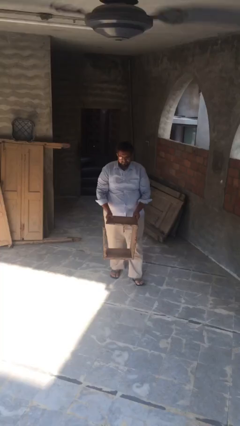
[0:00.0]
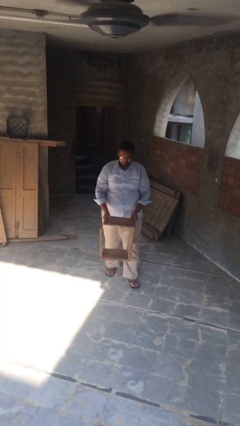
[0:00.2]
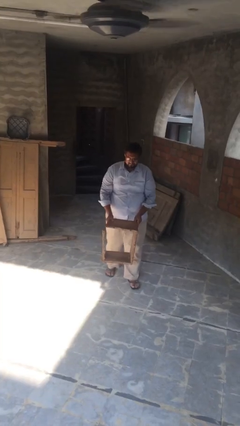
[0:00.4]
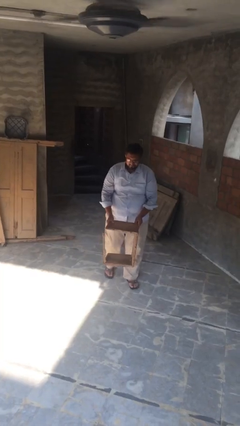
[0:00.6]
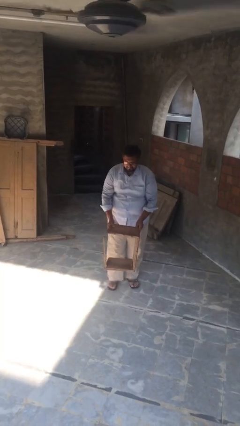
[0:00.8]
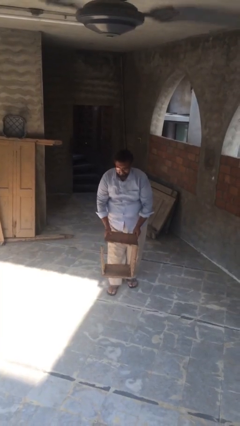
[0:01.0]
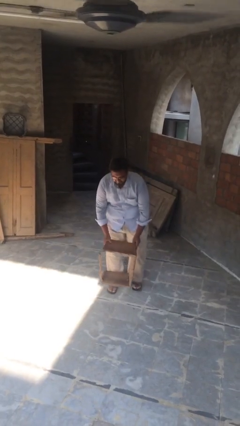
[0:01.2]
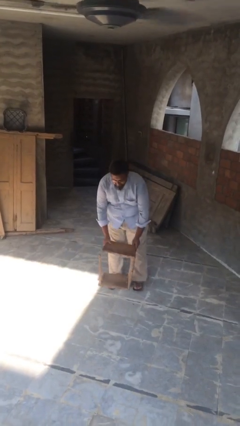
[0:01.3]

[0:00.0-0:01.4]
person puts down object on floor

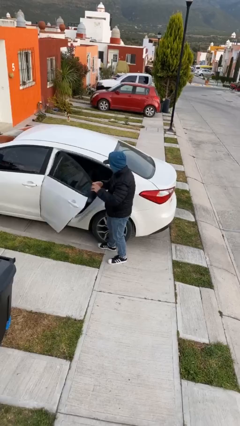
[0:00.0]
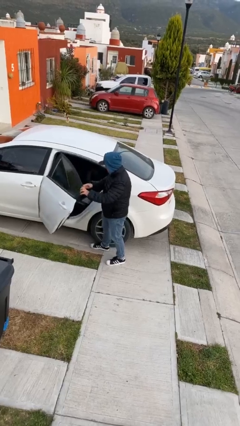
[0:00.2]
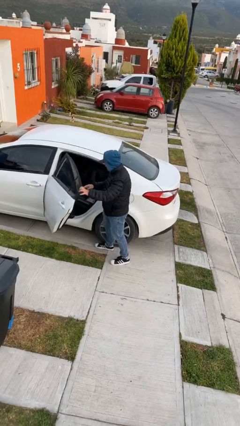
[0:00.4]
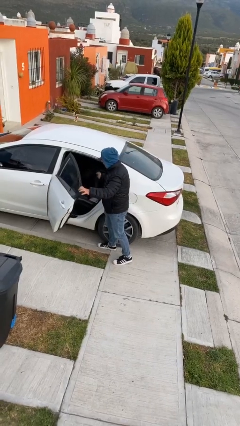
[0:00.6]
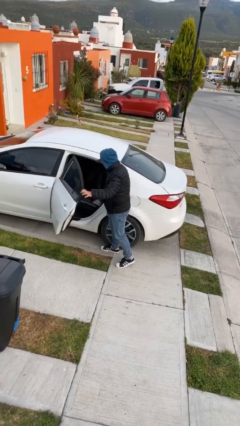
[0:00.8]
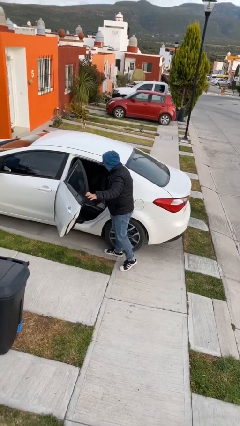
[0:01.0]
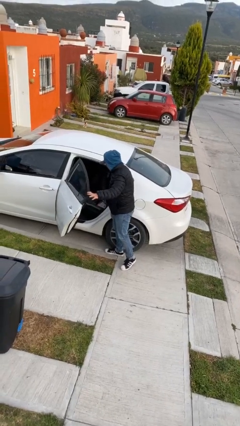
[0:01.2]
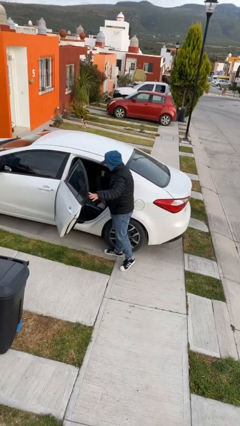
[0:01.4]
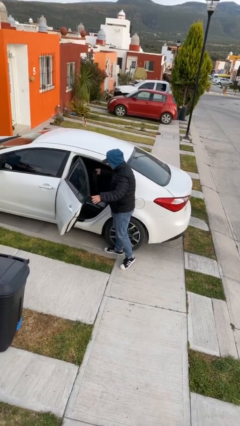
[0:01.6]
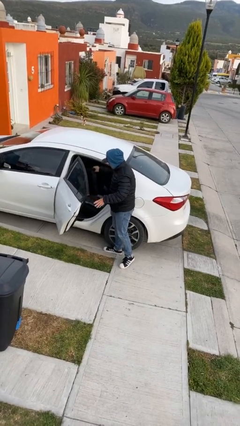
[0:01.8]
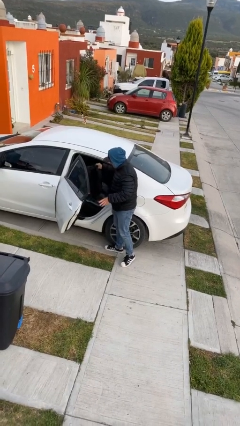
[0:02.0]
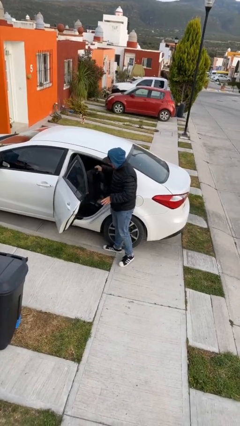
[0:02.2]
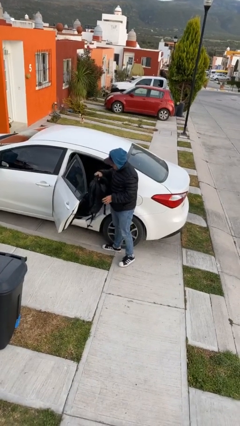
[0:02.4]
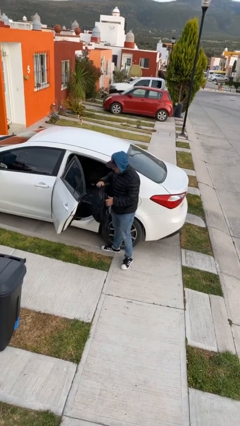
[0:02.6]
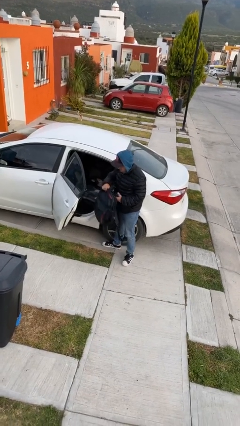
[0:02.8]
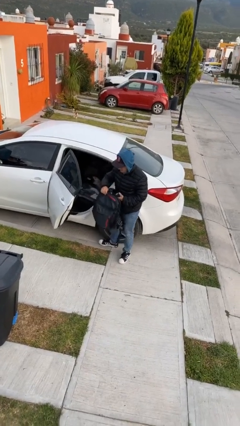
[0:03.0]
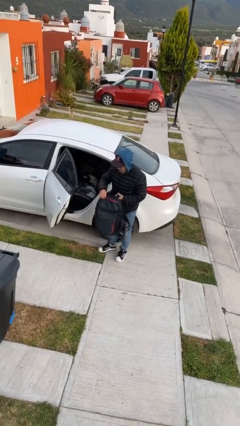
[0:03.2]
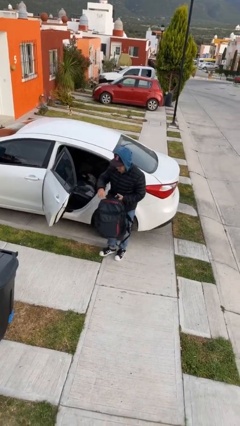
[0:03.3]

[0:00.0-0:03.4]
person unloads car

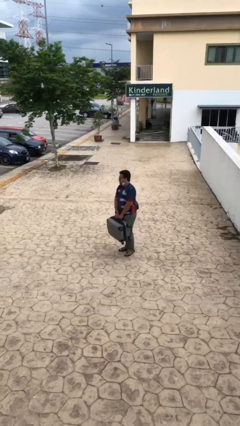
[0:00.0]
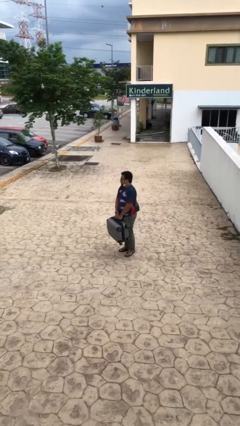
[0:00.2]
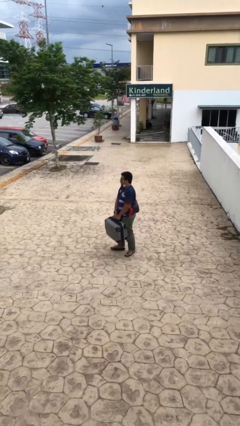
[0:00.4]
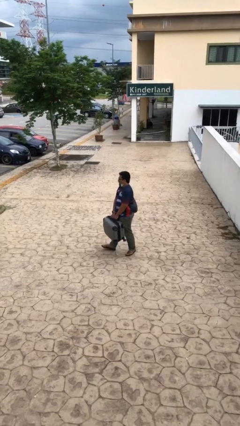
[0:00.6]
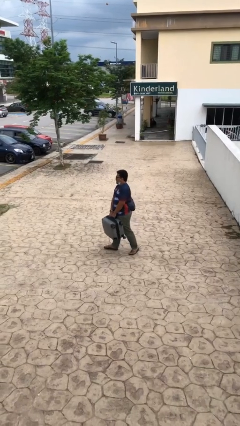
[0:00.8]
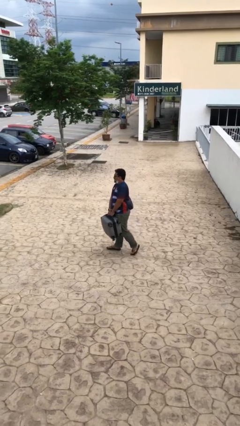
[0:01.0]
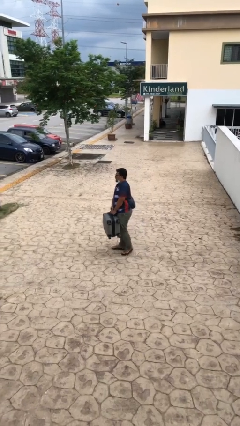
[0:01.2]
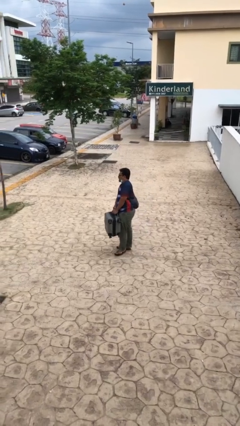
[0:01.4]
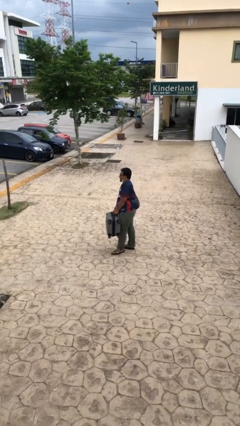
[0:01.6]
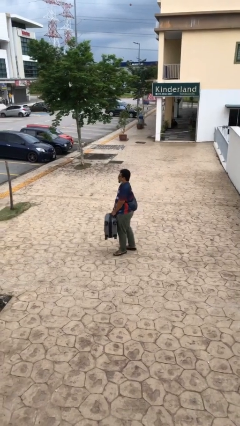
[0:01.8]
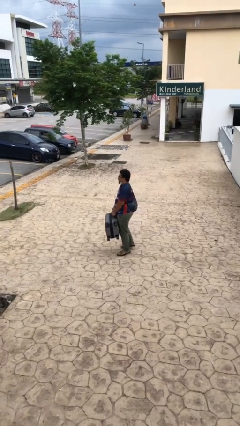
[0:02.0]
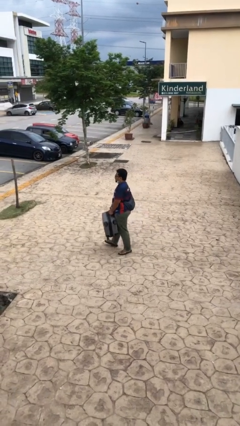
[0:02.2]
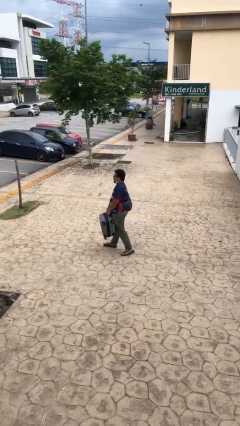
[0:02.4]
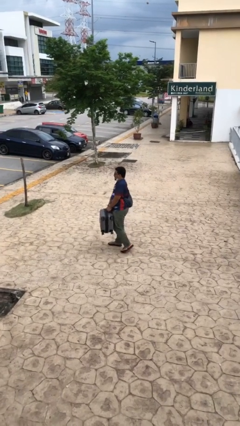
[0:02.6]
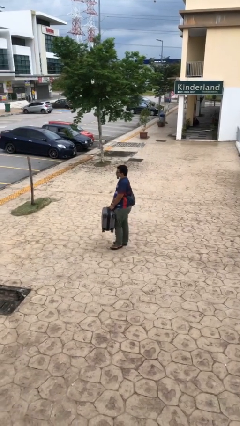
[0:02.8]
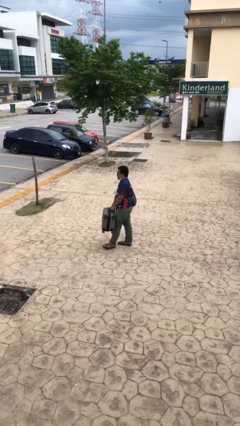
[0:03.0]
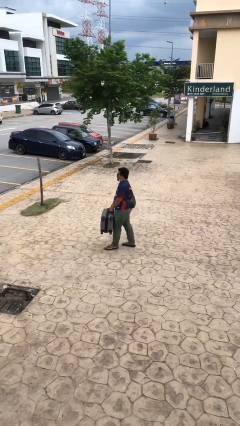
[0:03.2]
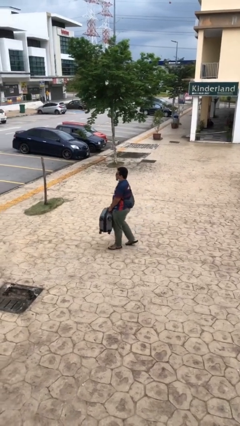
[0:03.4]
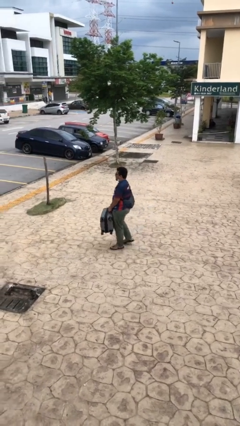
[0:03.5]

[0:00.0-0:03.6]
person carries heavy object

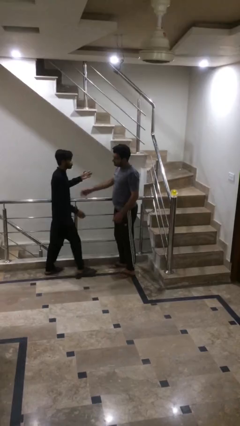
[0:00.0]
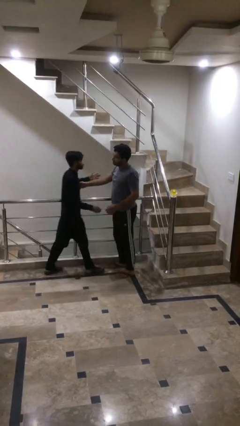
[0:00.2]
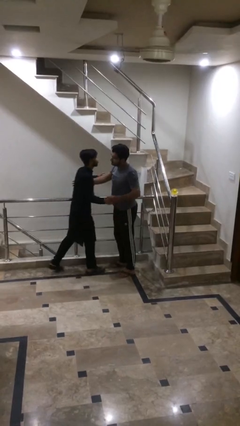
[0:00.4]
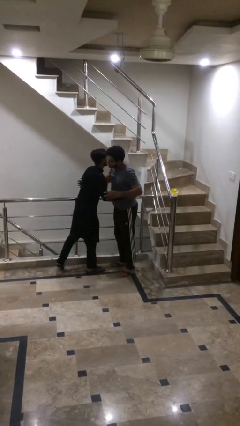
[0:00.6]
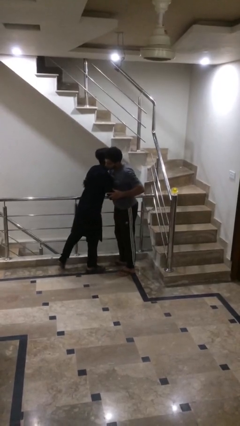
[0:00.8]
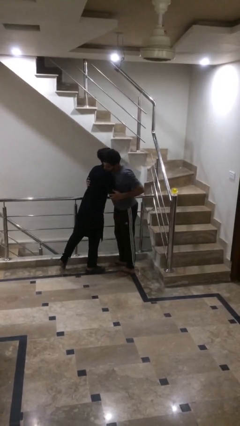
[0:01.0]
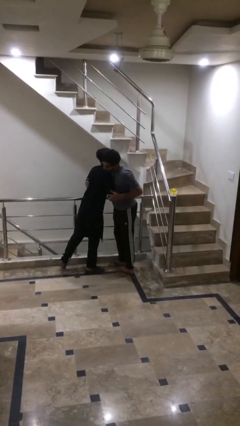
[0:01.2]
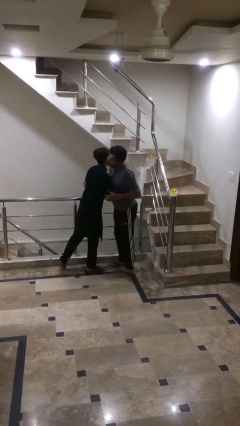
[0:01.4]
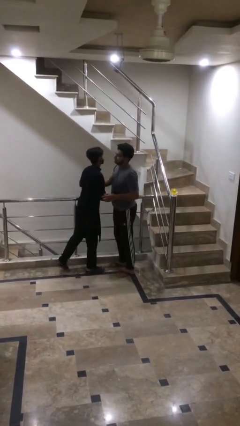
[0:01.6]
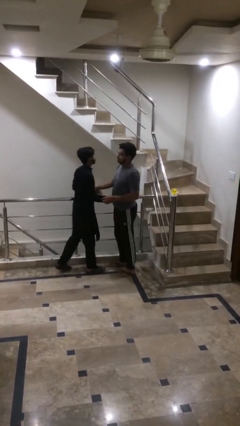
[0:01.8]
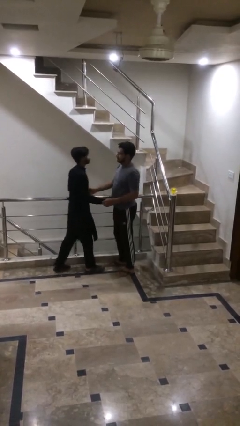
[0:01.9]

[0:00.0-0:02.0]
person embraces person

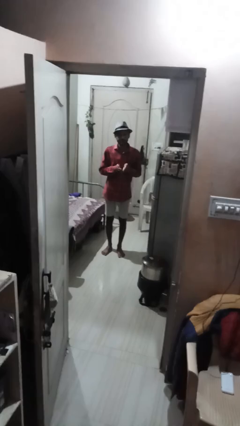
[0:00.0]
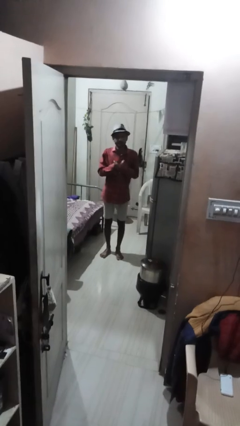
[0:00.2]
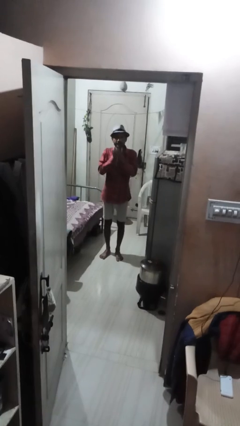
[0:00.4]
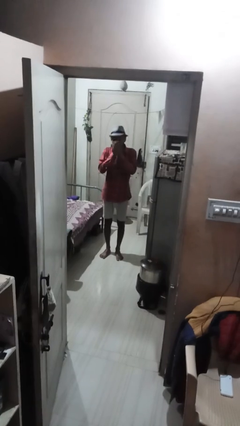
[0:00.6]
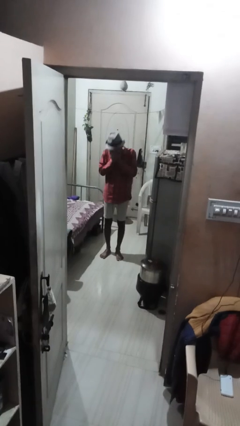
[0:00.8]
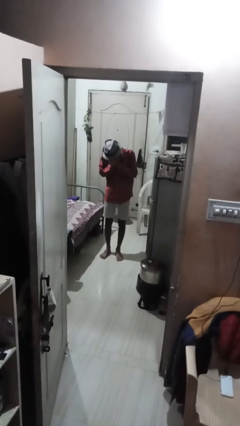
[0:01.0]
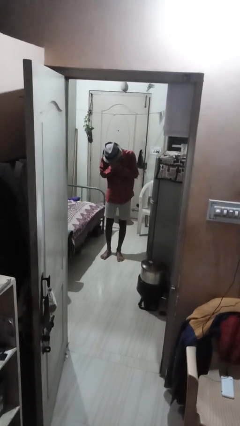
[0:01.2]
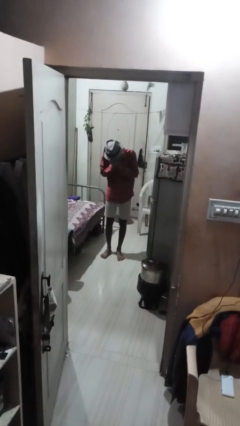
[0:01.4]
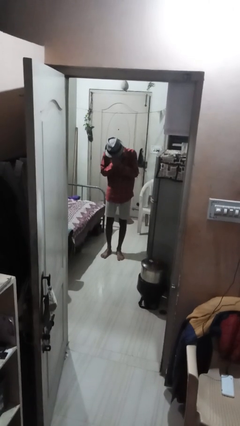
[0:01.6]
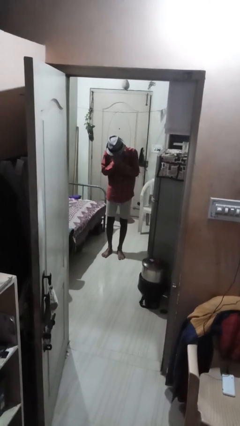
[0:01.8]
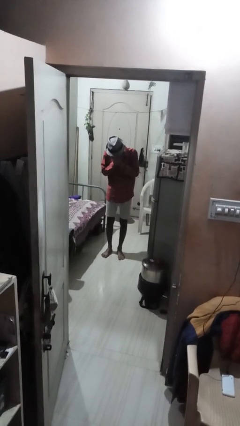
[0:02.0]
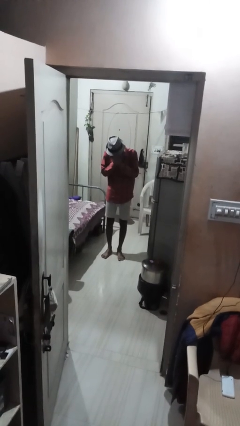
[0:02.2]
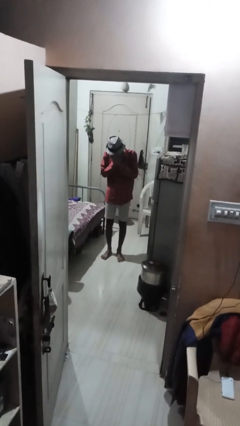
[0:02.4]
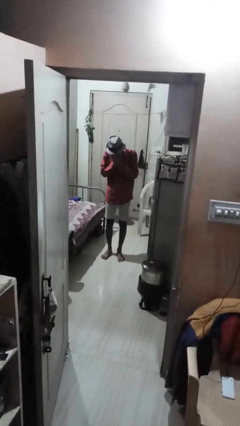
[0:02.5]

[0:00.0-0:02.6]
person sneezes into hand

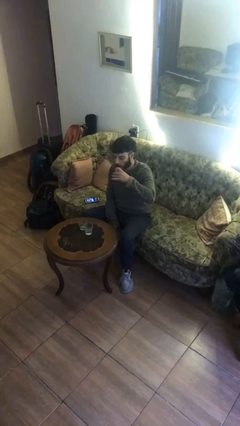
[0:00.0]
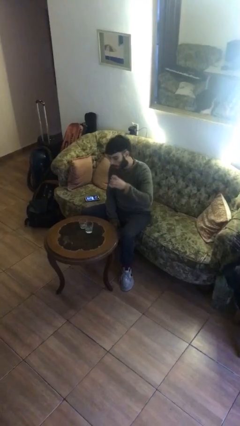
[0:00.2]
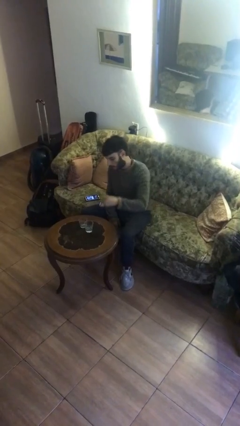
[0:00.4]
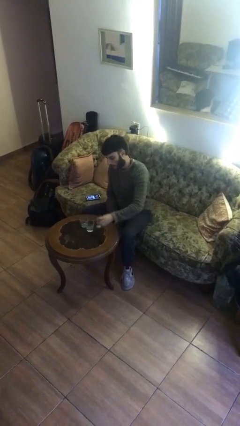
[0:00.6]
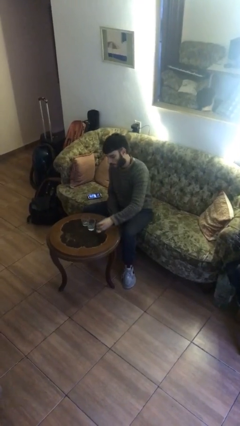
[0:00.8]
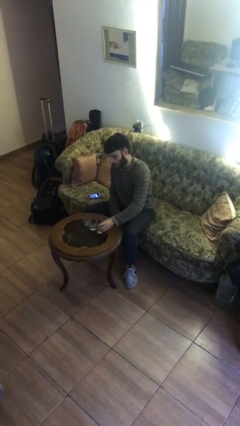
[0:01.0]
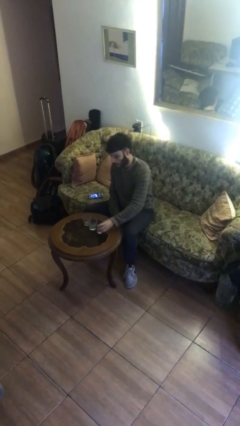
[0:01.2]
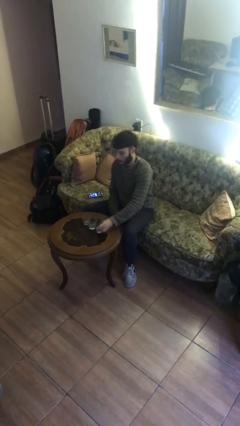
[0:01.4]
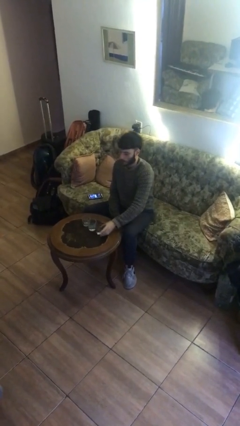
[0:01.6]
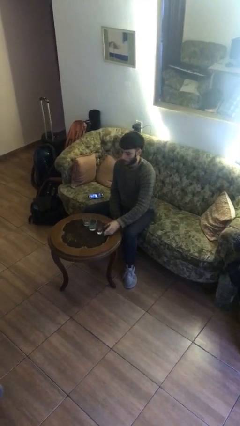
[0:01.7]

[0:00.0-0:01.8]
person puts down object on table

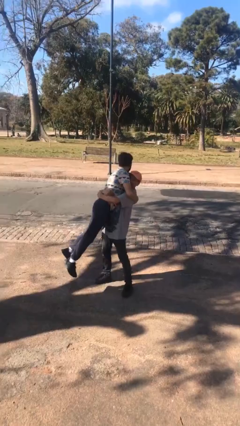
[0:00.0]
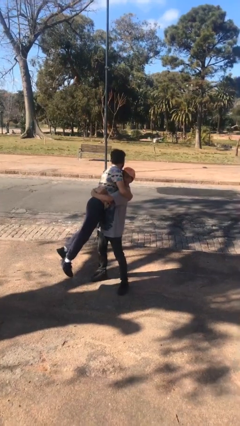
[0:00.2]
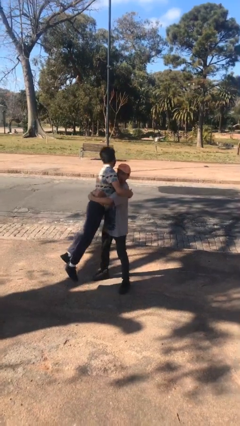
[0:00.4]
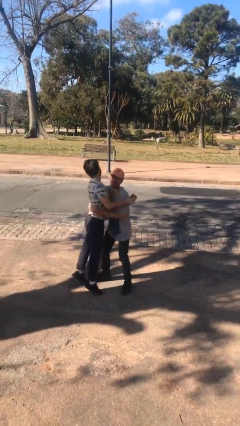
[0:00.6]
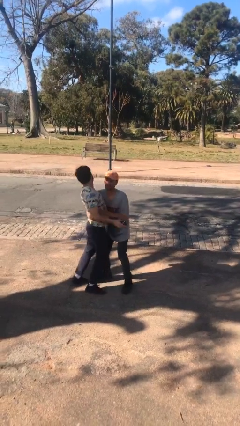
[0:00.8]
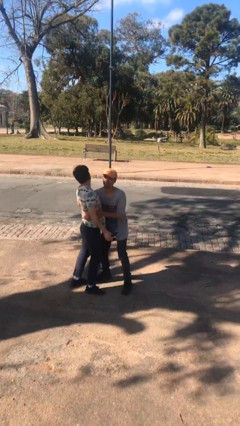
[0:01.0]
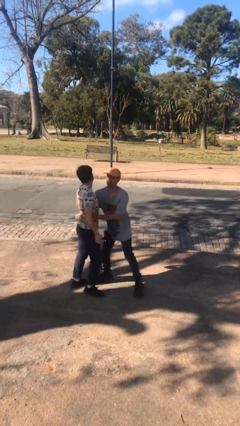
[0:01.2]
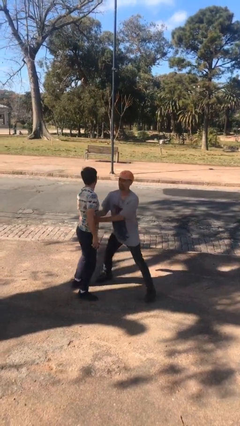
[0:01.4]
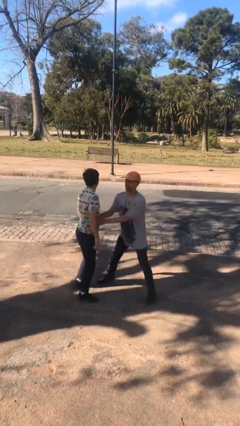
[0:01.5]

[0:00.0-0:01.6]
person puts down person

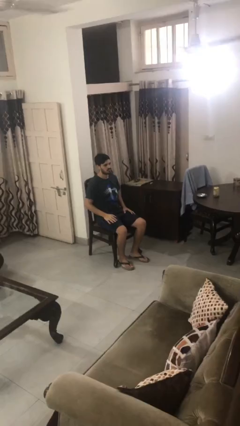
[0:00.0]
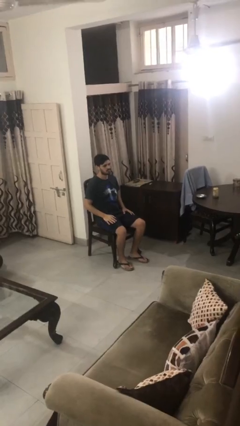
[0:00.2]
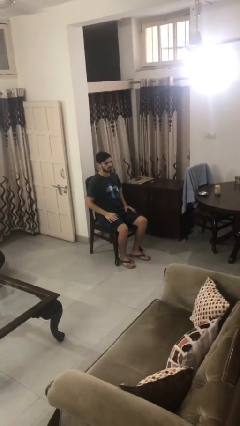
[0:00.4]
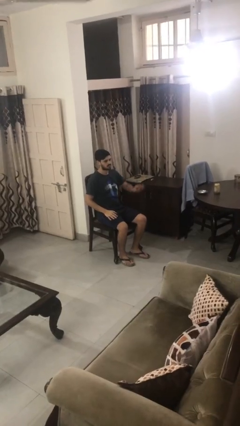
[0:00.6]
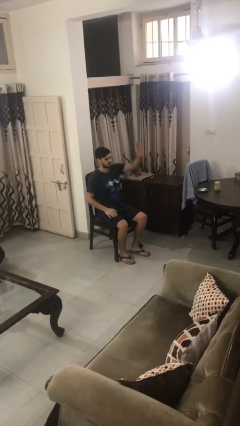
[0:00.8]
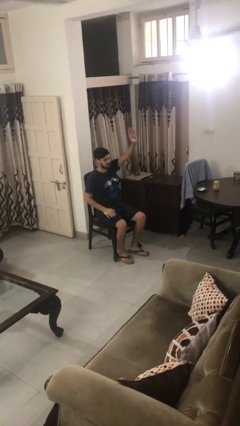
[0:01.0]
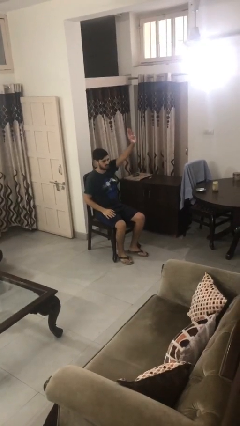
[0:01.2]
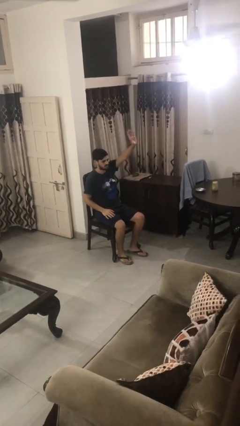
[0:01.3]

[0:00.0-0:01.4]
person gestures raise hand
